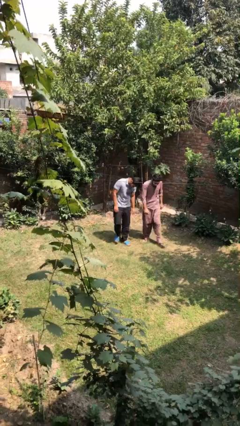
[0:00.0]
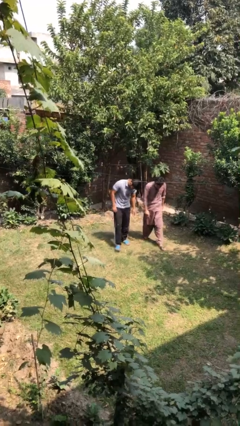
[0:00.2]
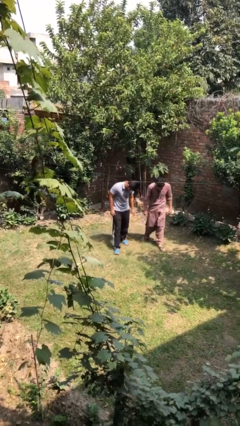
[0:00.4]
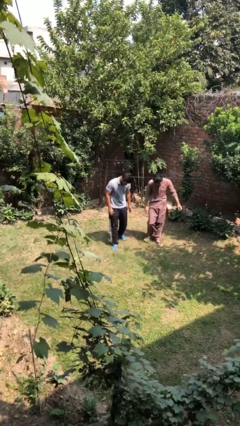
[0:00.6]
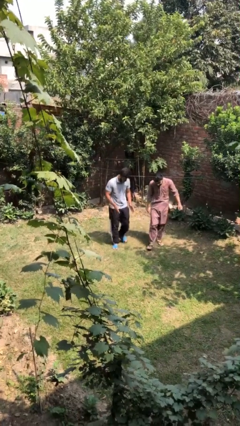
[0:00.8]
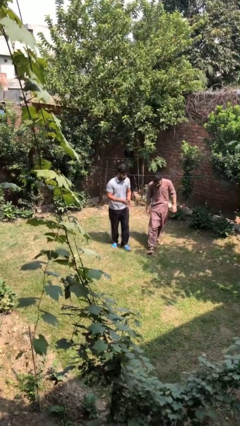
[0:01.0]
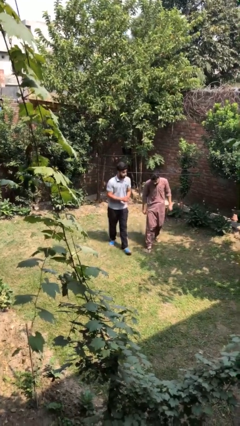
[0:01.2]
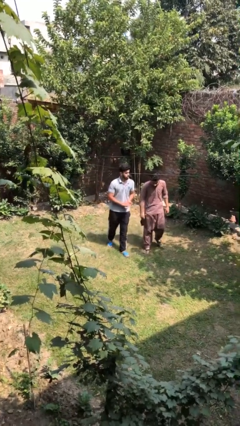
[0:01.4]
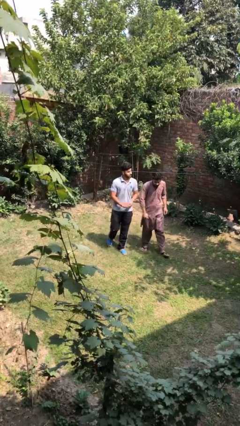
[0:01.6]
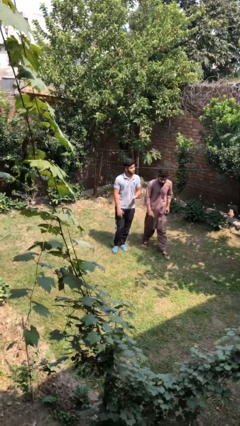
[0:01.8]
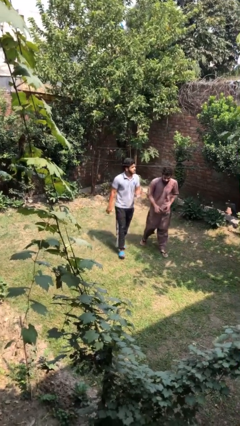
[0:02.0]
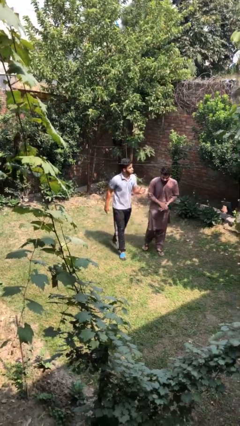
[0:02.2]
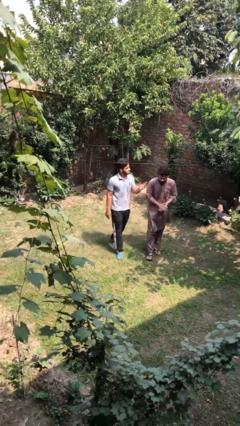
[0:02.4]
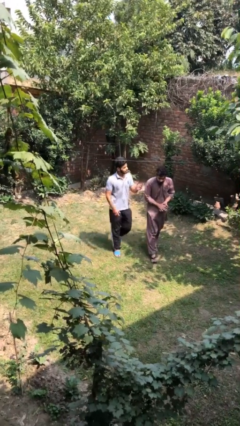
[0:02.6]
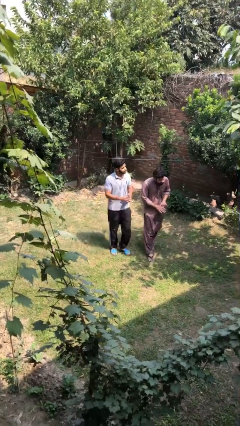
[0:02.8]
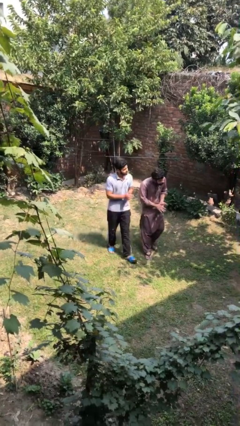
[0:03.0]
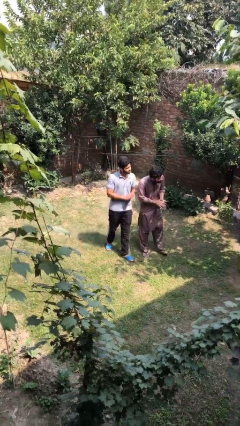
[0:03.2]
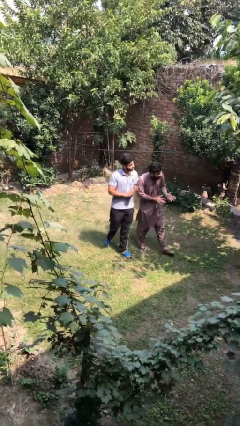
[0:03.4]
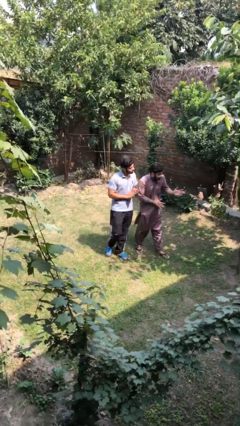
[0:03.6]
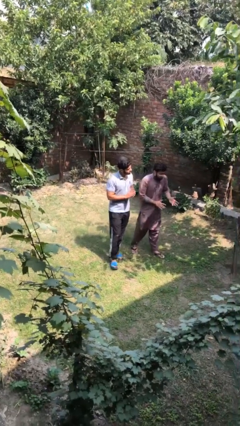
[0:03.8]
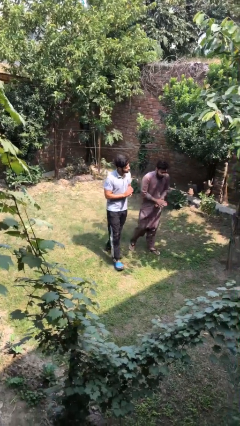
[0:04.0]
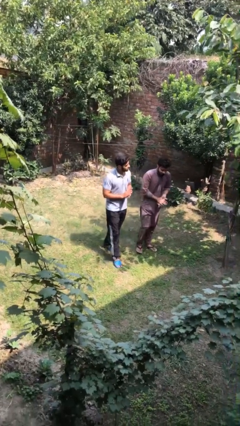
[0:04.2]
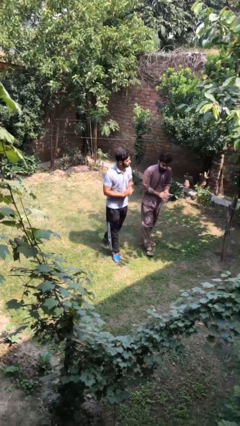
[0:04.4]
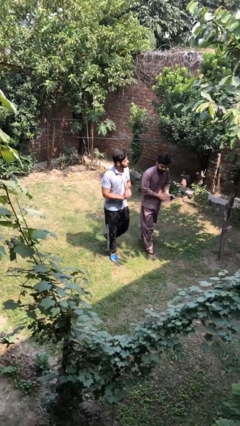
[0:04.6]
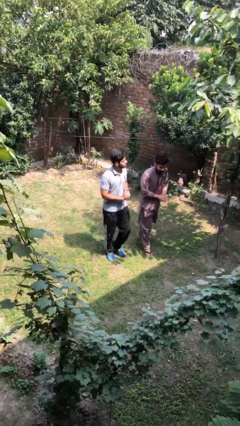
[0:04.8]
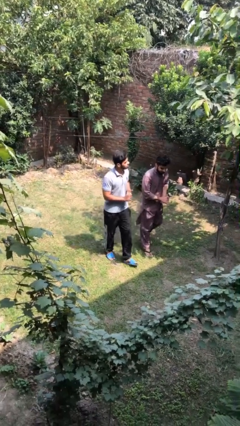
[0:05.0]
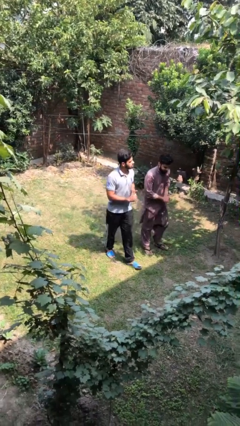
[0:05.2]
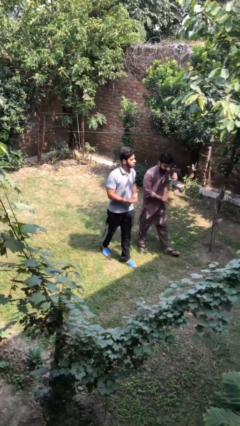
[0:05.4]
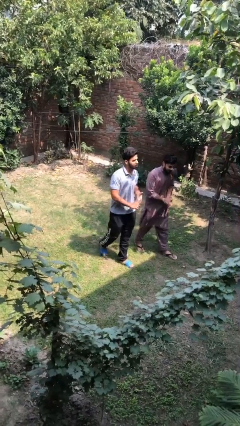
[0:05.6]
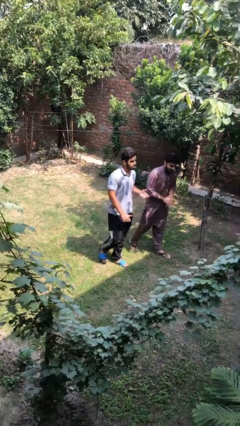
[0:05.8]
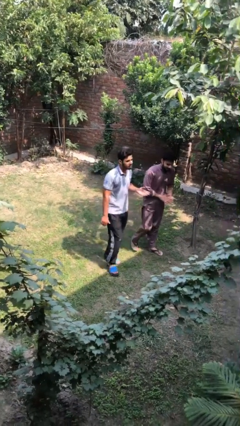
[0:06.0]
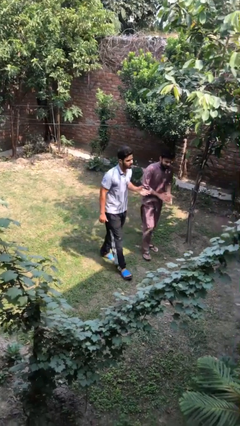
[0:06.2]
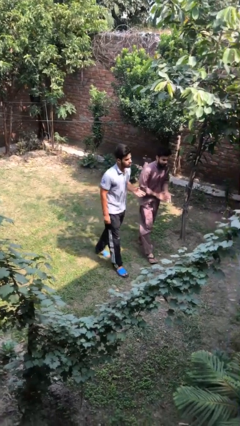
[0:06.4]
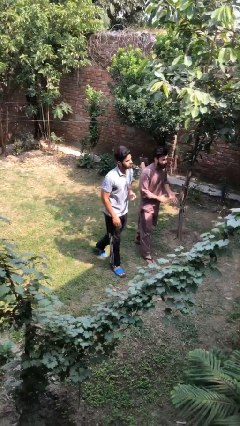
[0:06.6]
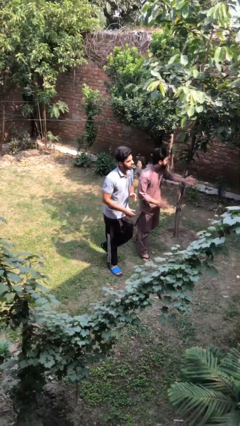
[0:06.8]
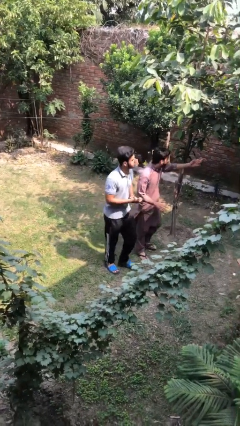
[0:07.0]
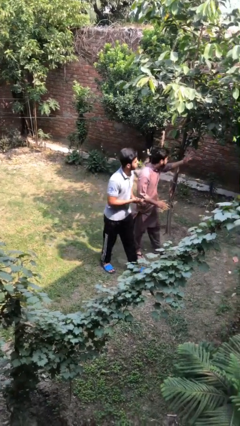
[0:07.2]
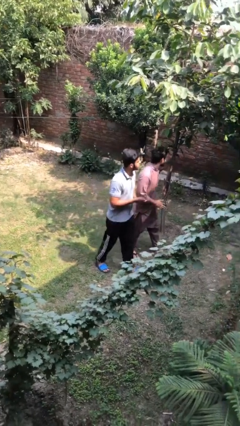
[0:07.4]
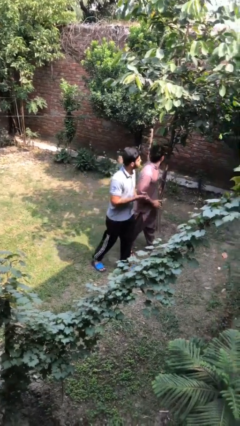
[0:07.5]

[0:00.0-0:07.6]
person talks to person

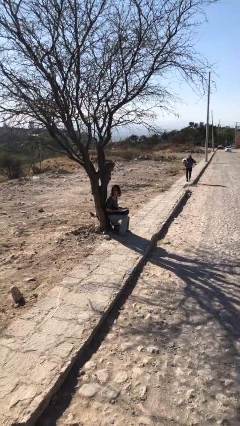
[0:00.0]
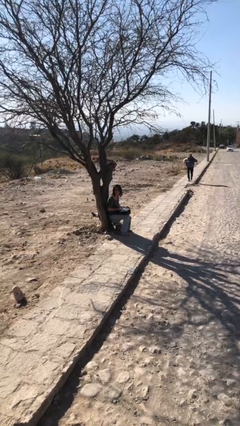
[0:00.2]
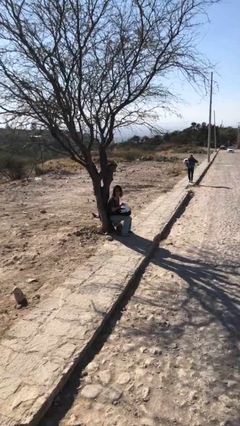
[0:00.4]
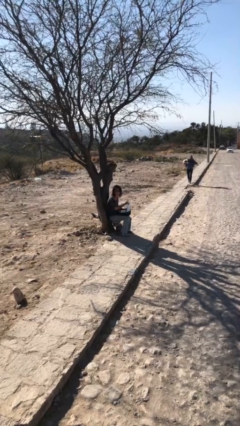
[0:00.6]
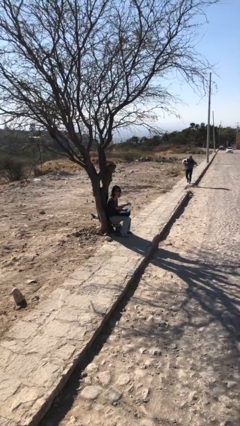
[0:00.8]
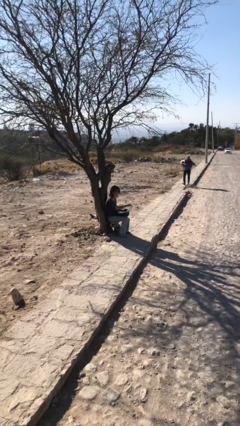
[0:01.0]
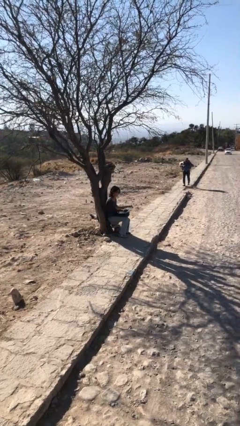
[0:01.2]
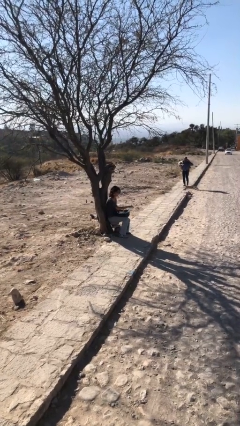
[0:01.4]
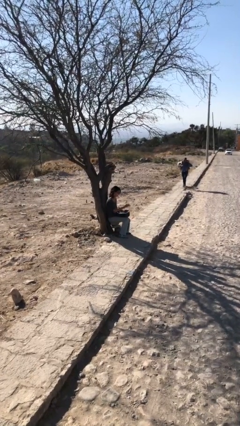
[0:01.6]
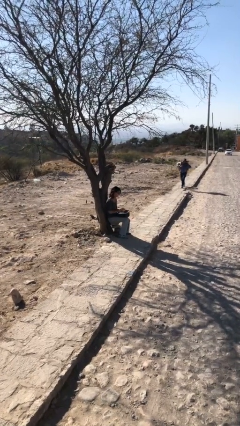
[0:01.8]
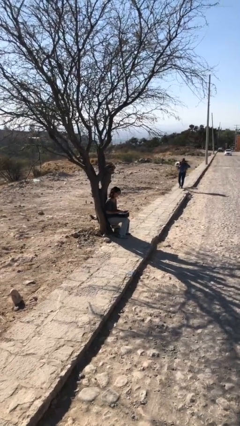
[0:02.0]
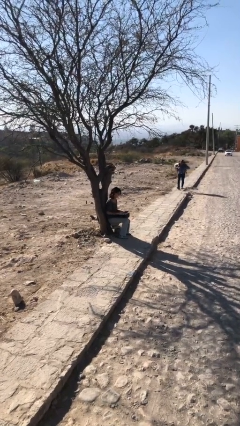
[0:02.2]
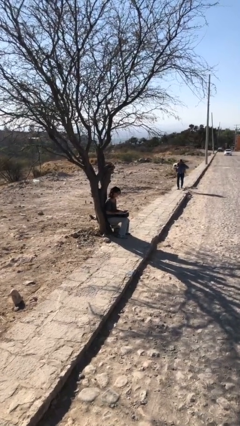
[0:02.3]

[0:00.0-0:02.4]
person interacts with laptop

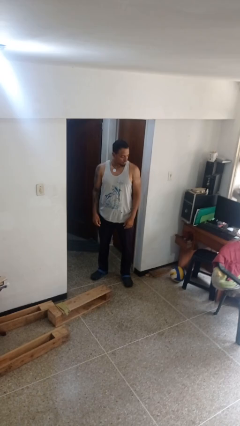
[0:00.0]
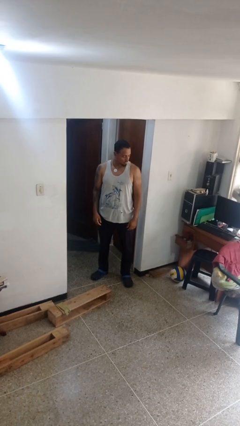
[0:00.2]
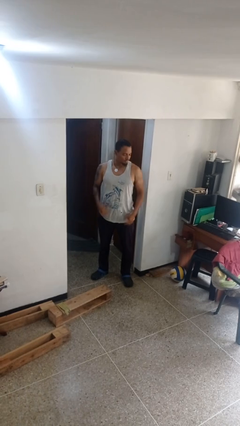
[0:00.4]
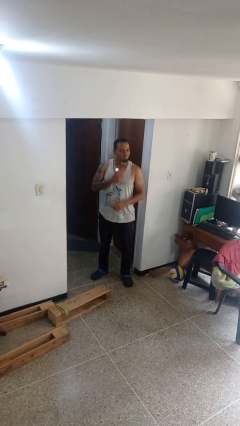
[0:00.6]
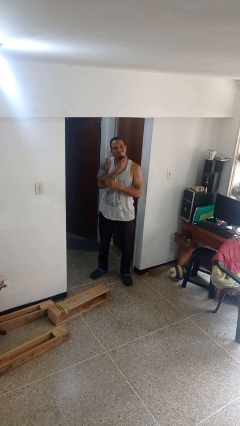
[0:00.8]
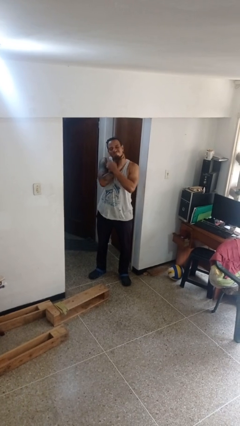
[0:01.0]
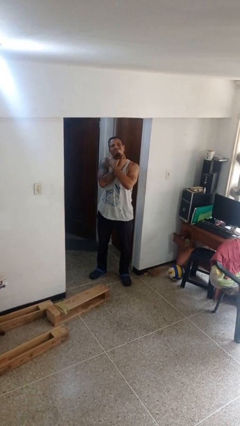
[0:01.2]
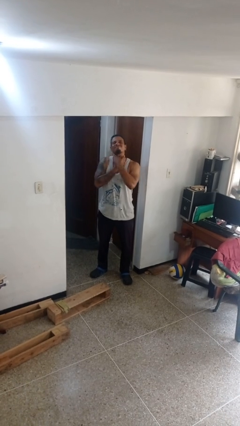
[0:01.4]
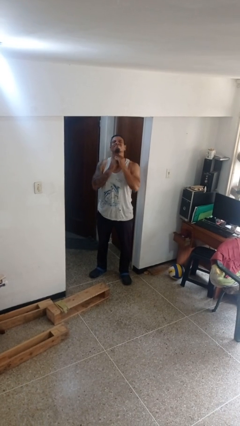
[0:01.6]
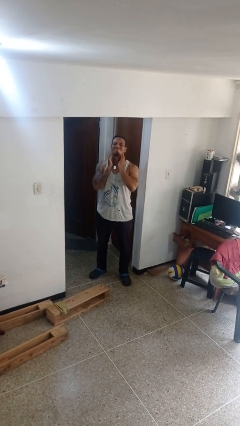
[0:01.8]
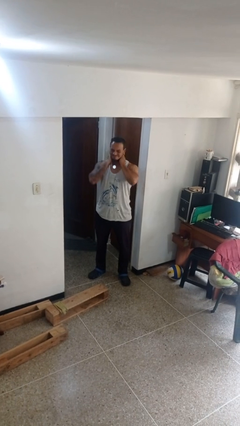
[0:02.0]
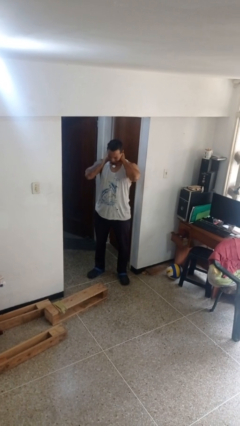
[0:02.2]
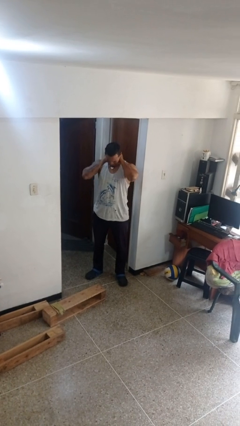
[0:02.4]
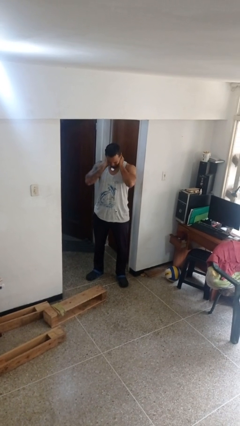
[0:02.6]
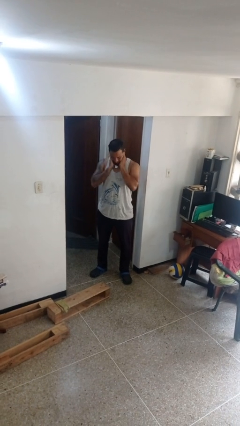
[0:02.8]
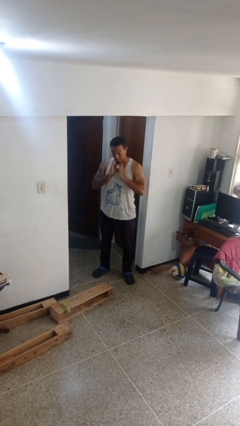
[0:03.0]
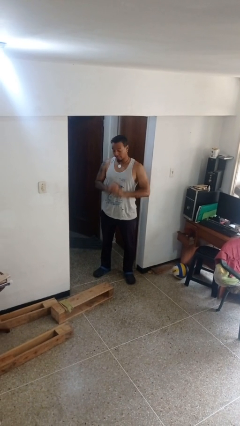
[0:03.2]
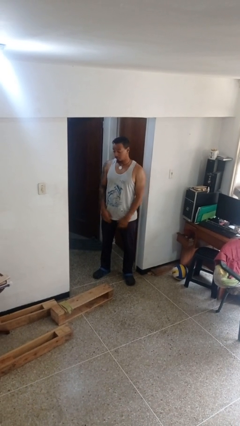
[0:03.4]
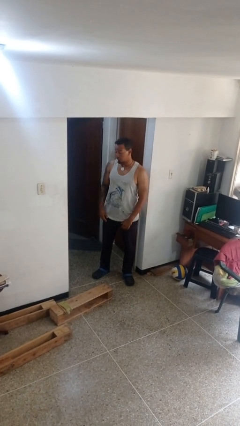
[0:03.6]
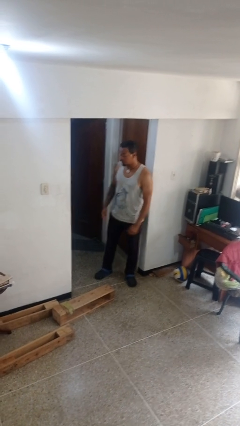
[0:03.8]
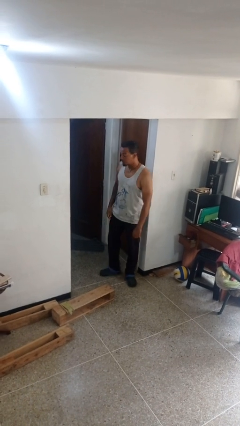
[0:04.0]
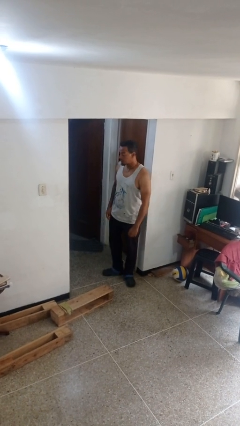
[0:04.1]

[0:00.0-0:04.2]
person rubs neck

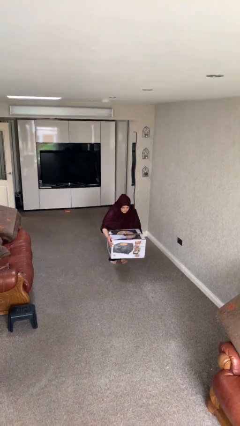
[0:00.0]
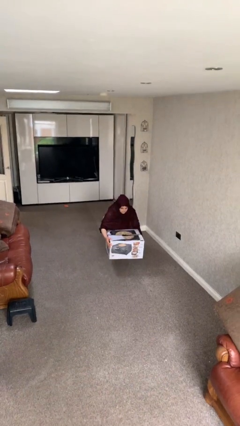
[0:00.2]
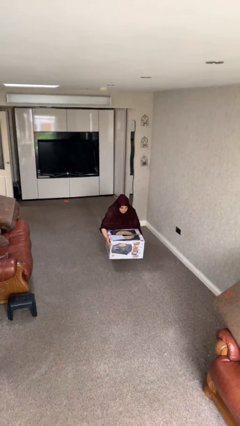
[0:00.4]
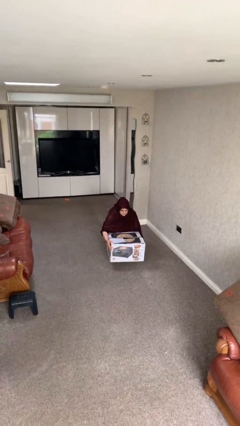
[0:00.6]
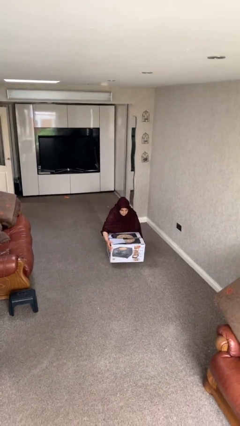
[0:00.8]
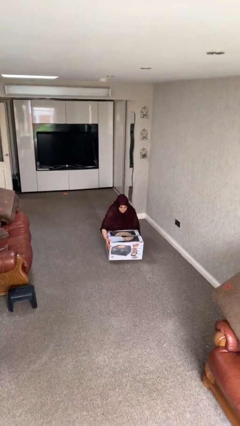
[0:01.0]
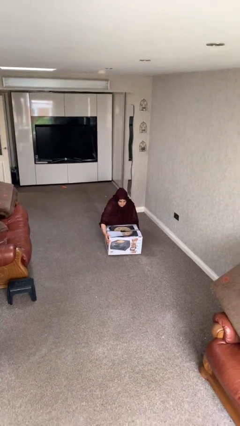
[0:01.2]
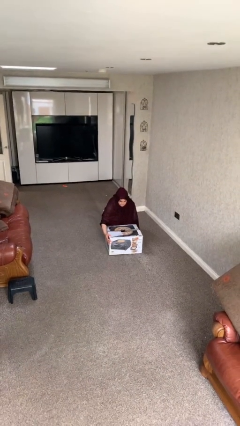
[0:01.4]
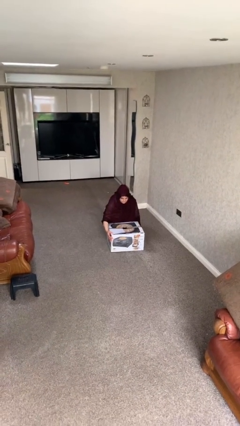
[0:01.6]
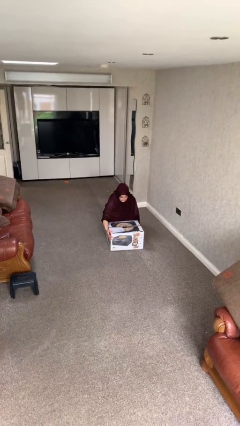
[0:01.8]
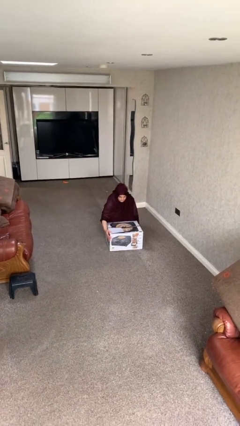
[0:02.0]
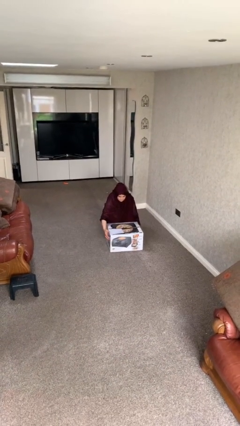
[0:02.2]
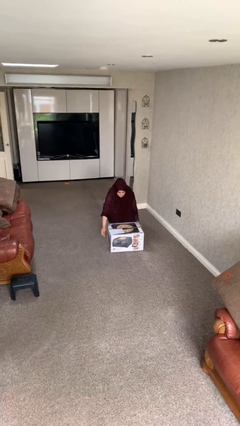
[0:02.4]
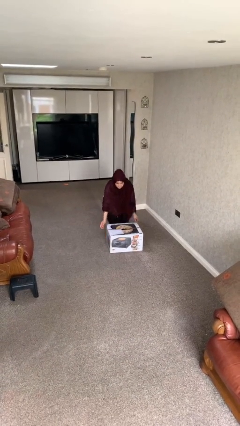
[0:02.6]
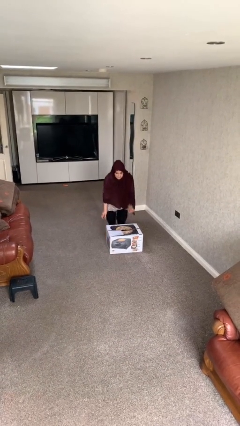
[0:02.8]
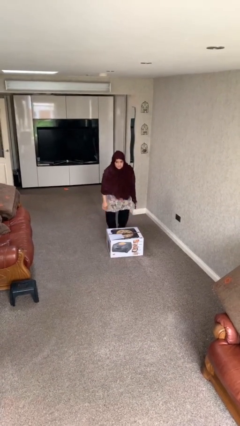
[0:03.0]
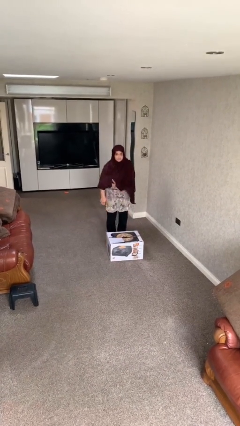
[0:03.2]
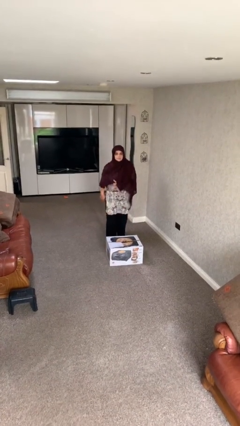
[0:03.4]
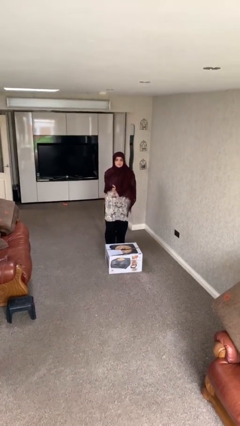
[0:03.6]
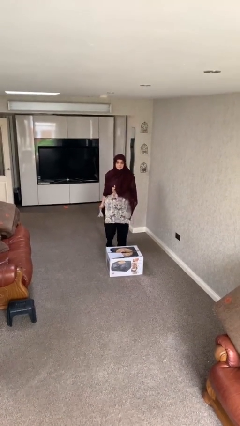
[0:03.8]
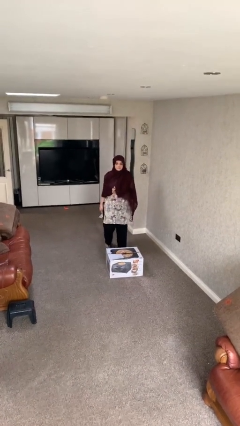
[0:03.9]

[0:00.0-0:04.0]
person puts down object on floor
